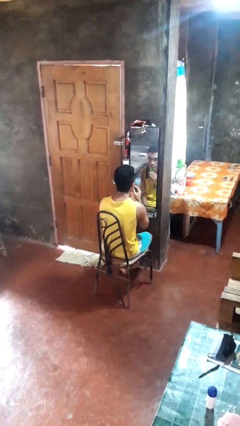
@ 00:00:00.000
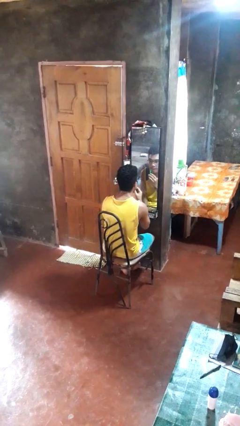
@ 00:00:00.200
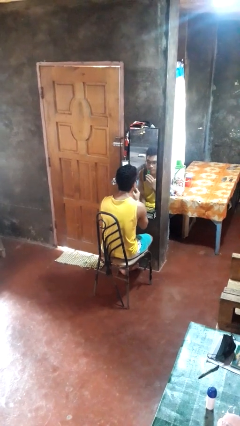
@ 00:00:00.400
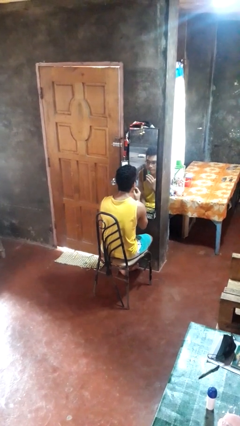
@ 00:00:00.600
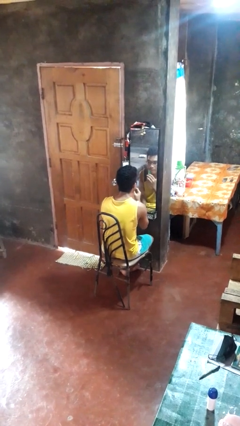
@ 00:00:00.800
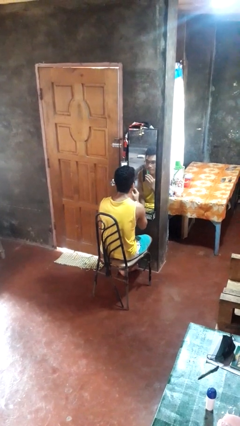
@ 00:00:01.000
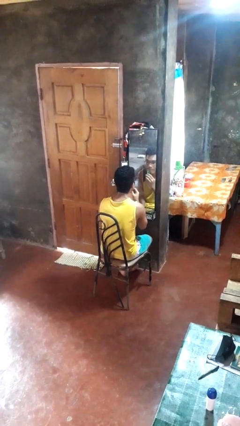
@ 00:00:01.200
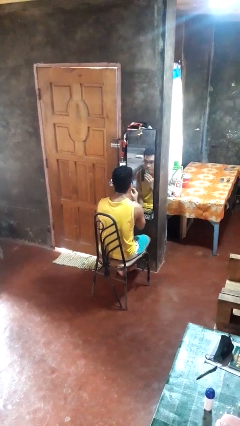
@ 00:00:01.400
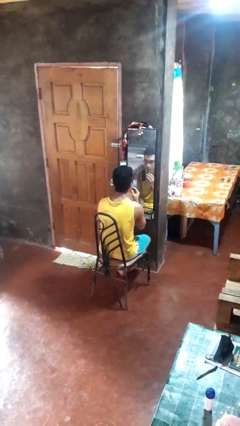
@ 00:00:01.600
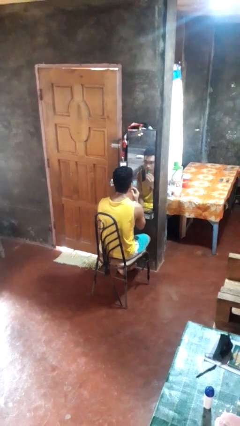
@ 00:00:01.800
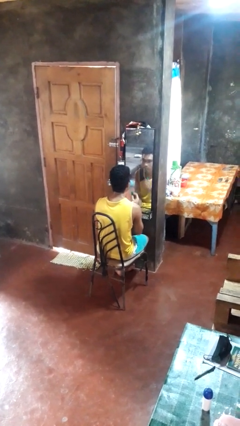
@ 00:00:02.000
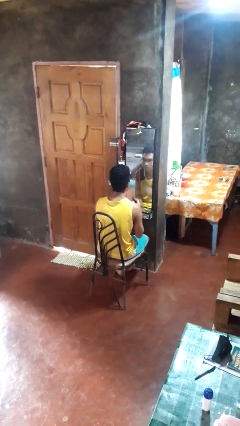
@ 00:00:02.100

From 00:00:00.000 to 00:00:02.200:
person applies lip makeup

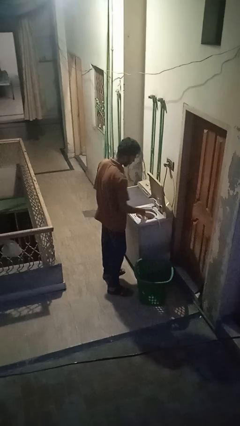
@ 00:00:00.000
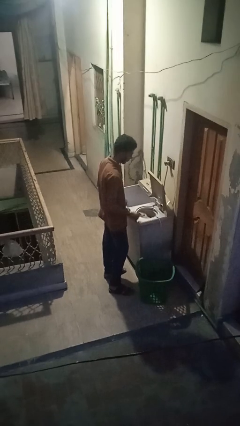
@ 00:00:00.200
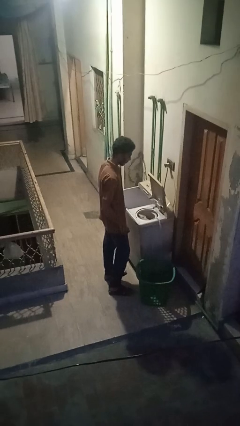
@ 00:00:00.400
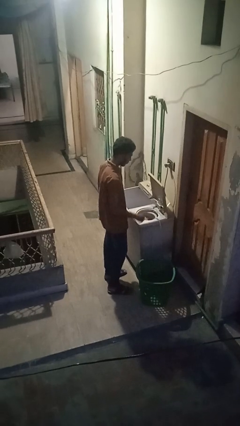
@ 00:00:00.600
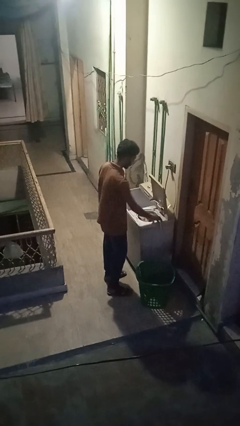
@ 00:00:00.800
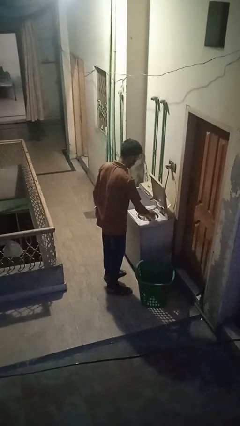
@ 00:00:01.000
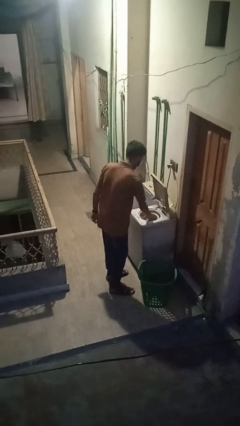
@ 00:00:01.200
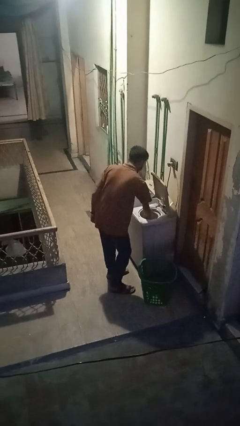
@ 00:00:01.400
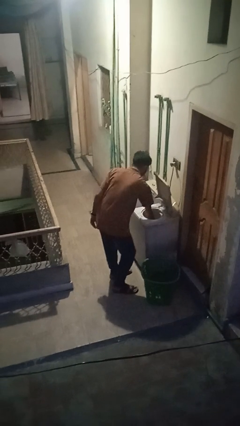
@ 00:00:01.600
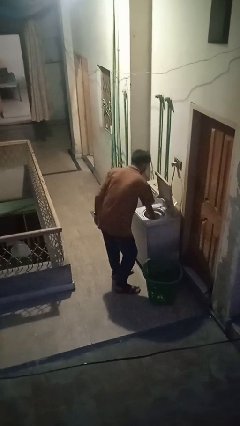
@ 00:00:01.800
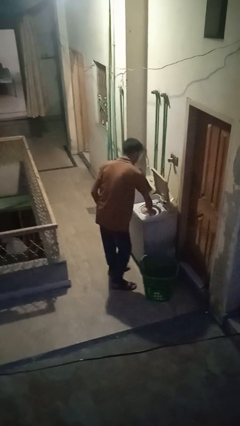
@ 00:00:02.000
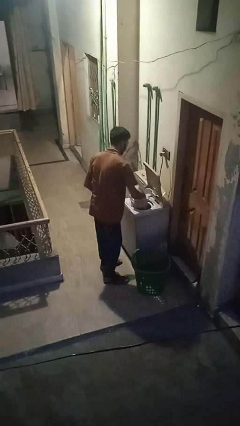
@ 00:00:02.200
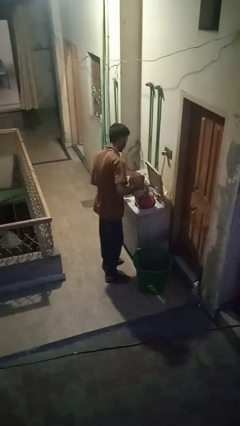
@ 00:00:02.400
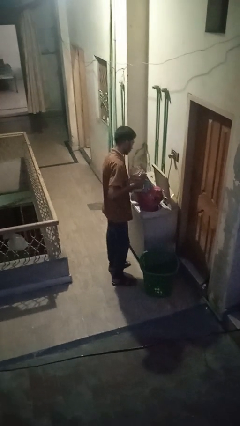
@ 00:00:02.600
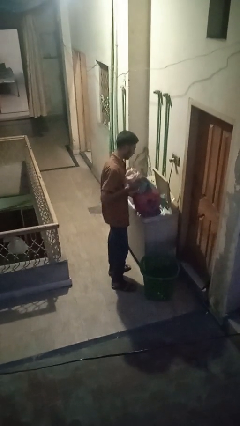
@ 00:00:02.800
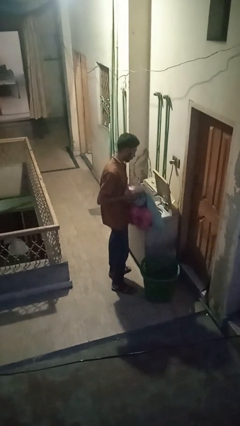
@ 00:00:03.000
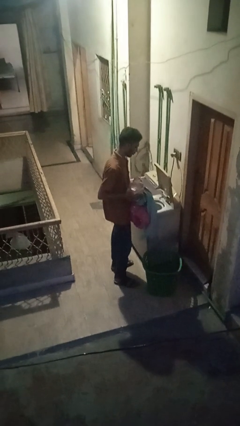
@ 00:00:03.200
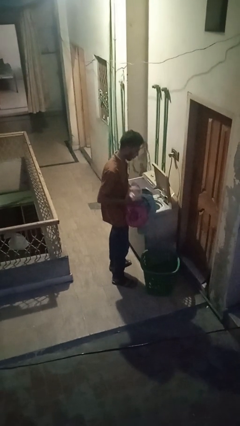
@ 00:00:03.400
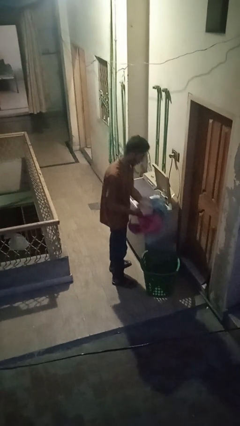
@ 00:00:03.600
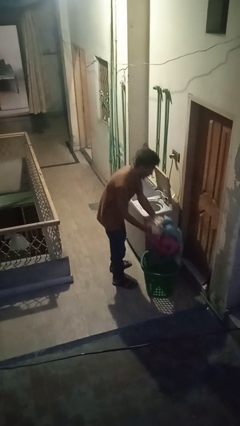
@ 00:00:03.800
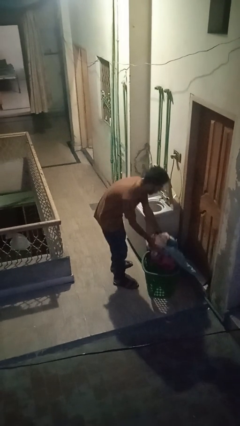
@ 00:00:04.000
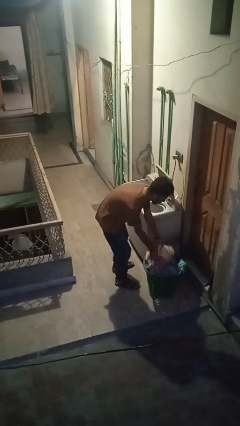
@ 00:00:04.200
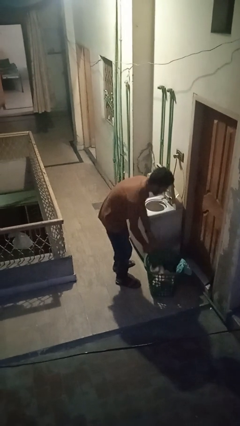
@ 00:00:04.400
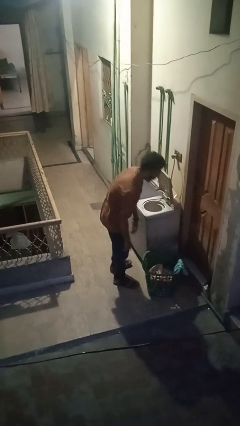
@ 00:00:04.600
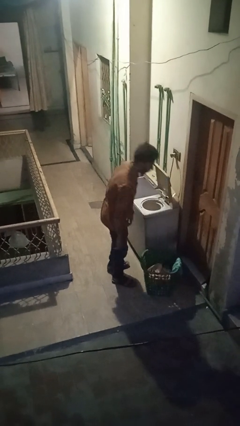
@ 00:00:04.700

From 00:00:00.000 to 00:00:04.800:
person unloads dryer

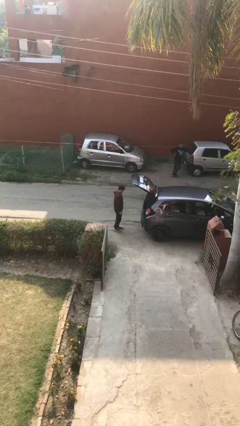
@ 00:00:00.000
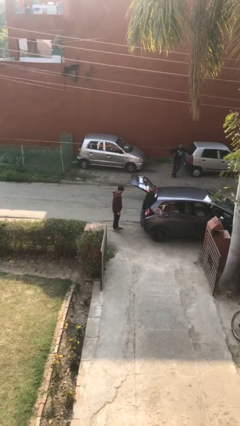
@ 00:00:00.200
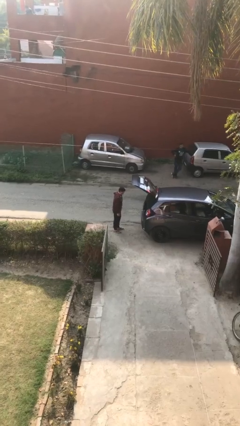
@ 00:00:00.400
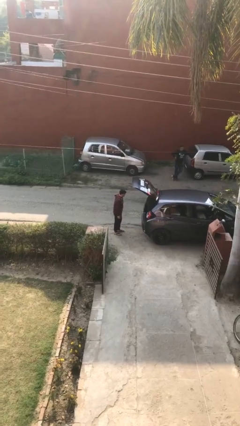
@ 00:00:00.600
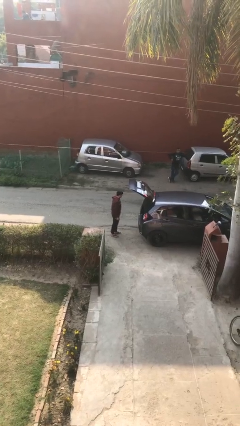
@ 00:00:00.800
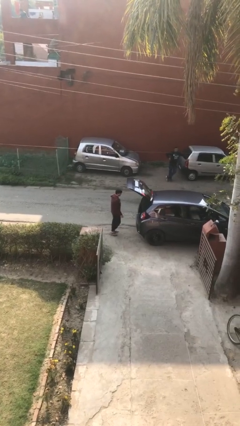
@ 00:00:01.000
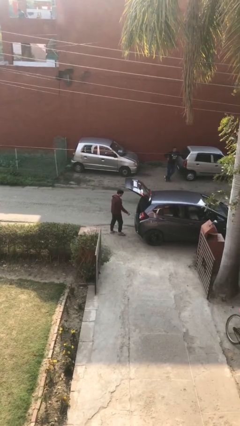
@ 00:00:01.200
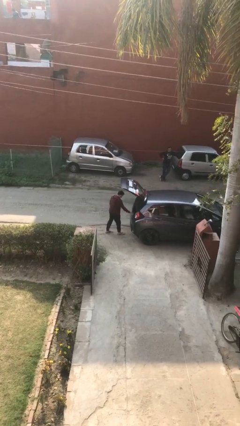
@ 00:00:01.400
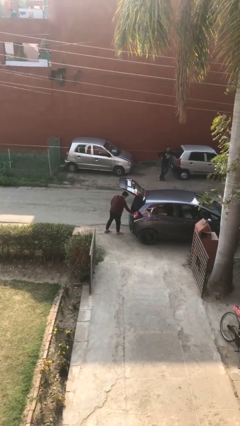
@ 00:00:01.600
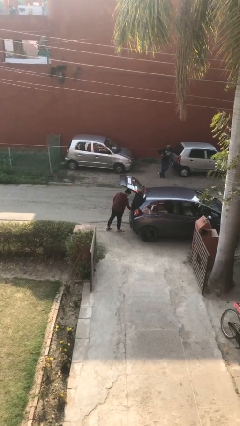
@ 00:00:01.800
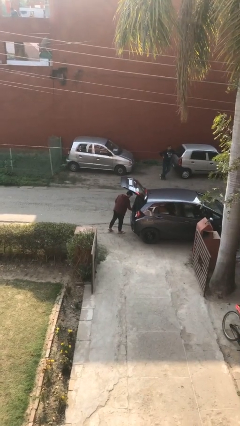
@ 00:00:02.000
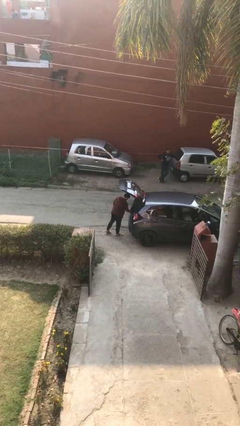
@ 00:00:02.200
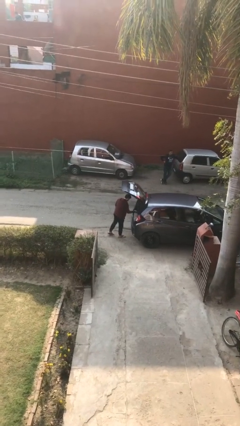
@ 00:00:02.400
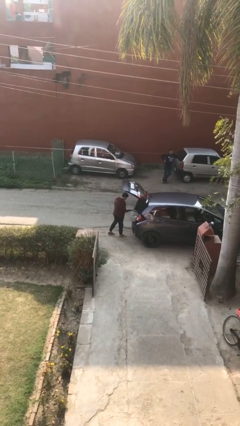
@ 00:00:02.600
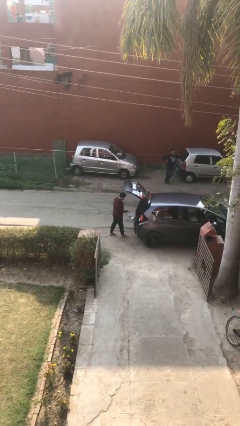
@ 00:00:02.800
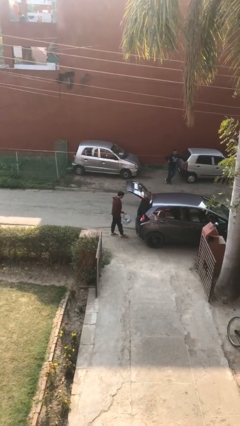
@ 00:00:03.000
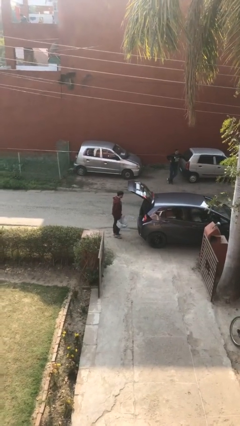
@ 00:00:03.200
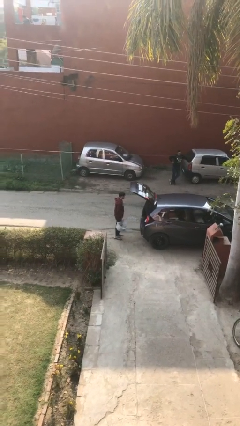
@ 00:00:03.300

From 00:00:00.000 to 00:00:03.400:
person unloads car

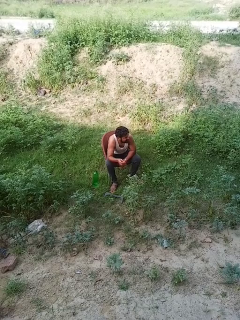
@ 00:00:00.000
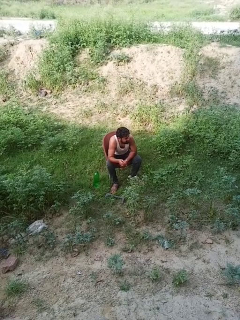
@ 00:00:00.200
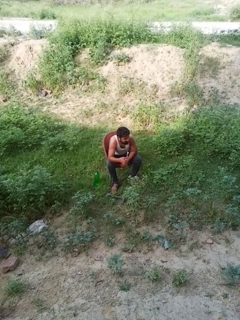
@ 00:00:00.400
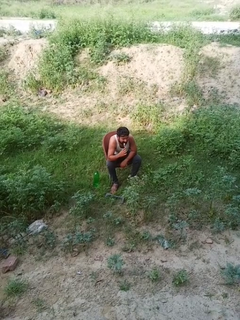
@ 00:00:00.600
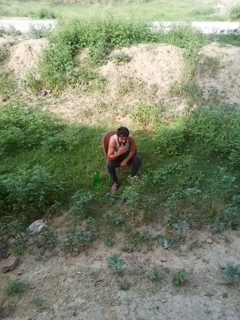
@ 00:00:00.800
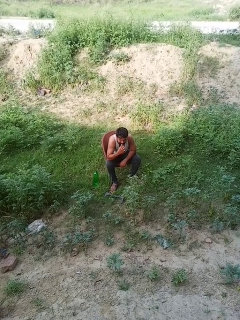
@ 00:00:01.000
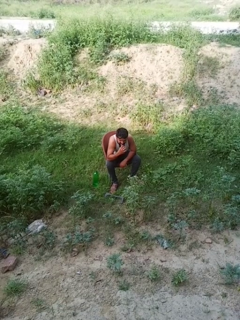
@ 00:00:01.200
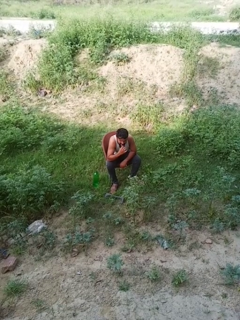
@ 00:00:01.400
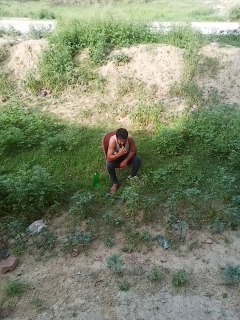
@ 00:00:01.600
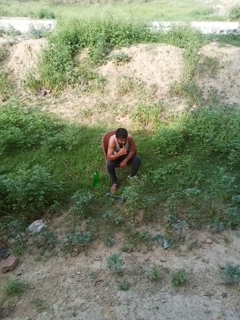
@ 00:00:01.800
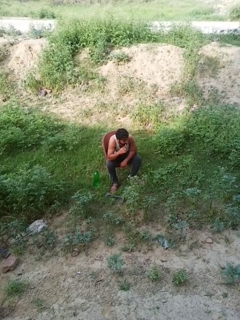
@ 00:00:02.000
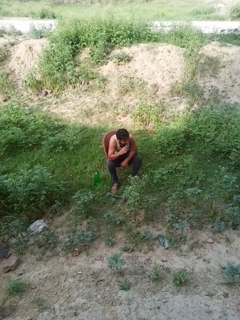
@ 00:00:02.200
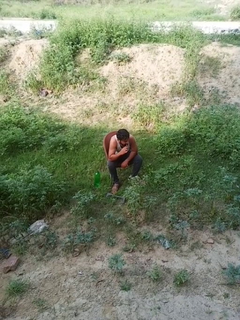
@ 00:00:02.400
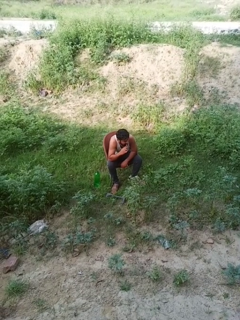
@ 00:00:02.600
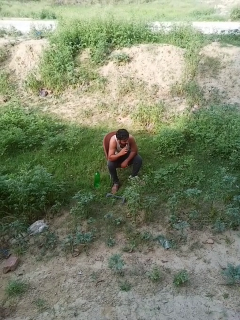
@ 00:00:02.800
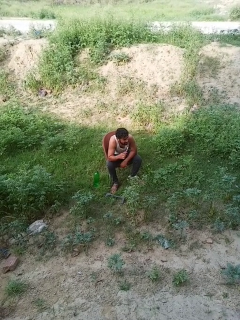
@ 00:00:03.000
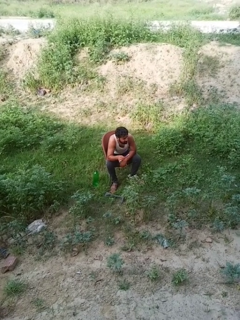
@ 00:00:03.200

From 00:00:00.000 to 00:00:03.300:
person brushes teeth

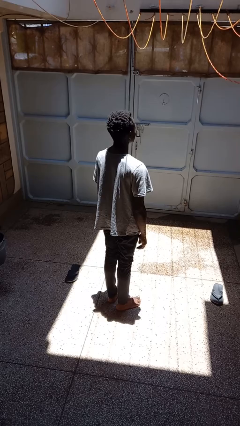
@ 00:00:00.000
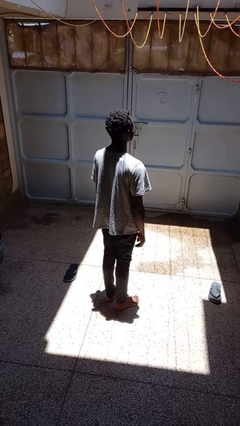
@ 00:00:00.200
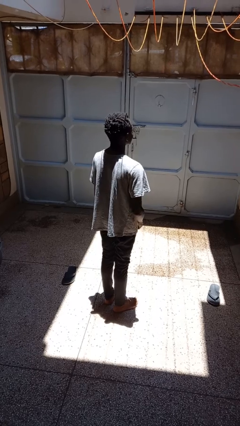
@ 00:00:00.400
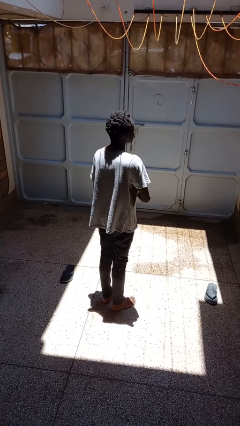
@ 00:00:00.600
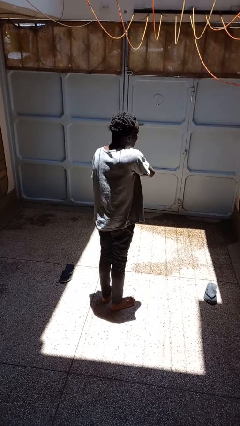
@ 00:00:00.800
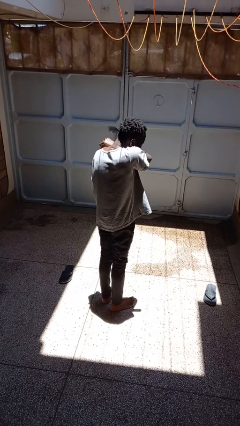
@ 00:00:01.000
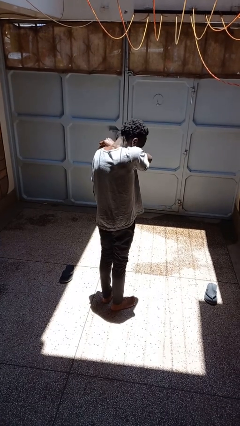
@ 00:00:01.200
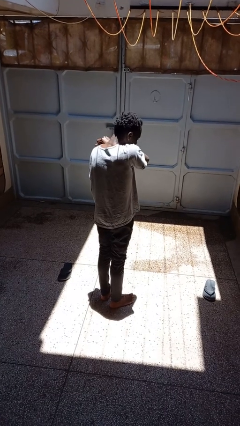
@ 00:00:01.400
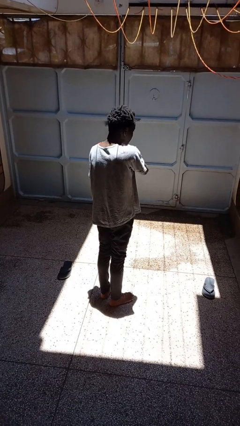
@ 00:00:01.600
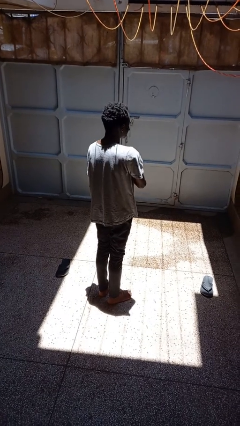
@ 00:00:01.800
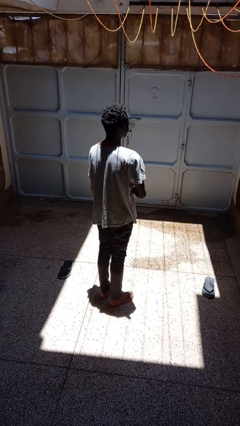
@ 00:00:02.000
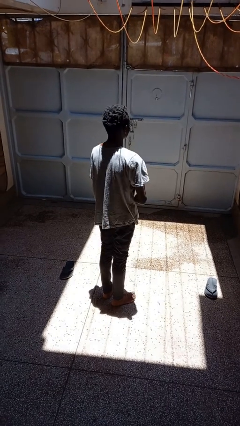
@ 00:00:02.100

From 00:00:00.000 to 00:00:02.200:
person sneezes into arm

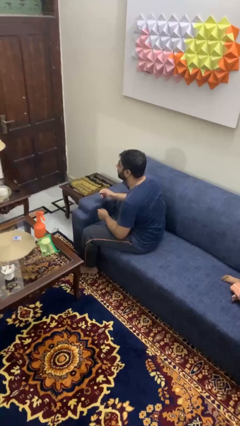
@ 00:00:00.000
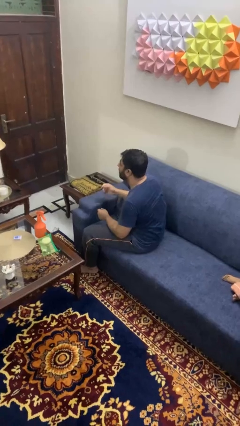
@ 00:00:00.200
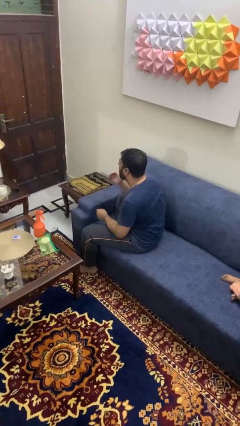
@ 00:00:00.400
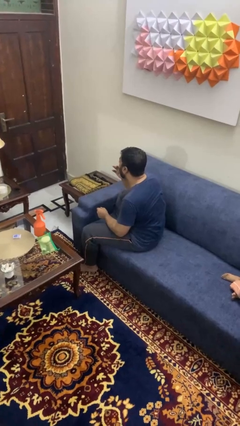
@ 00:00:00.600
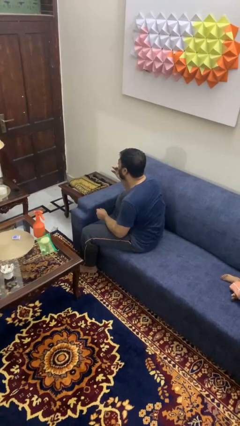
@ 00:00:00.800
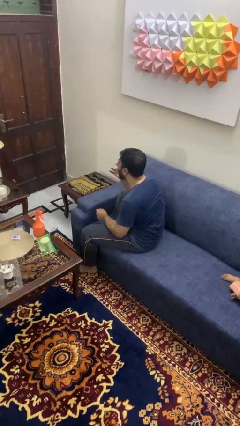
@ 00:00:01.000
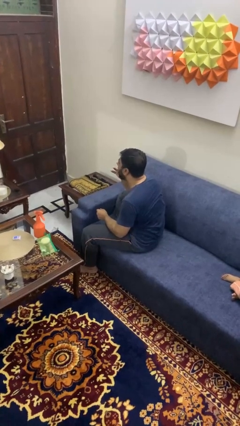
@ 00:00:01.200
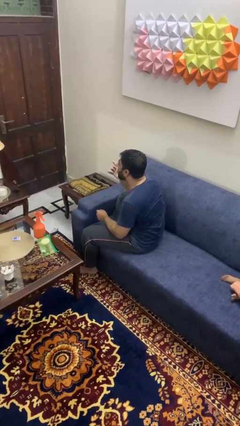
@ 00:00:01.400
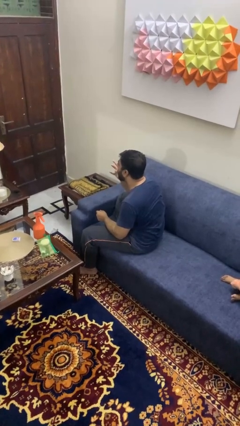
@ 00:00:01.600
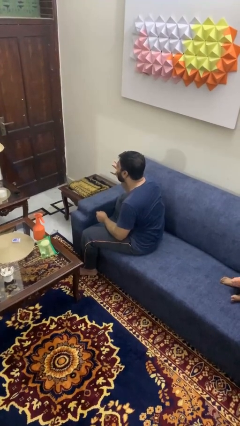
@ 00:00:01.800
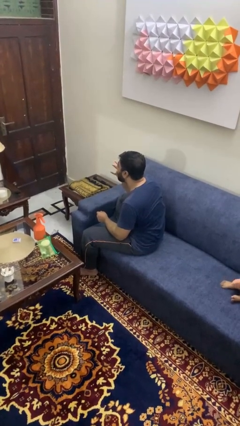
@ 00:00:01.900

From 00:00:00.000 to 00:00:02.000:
person licks fingers
